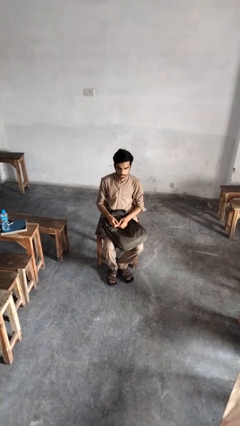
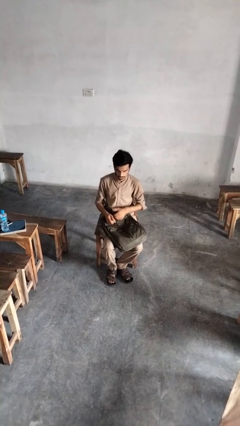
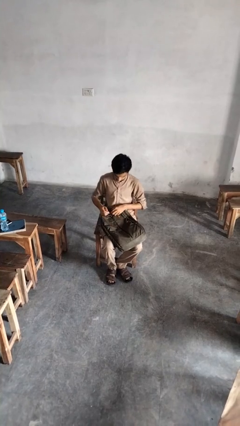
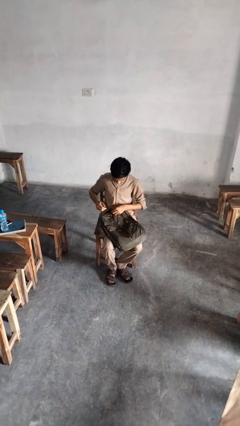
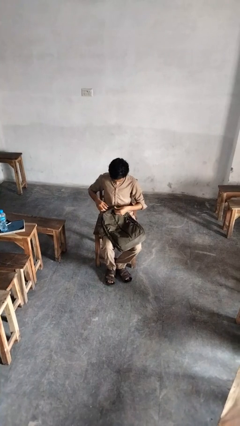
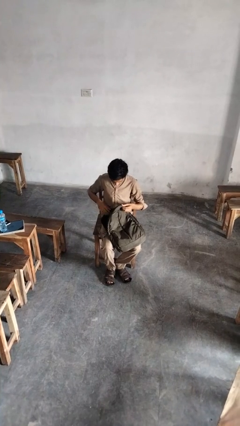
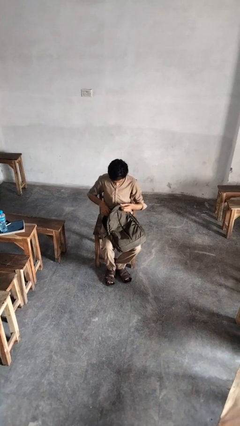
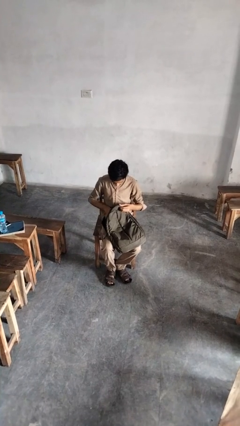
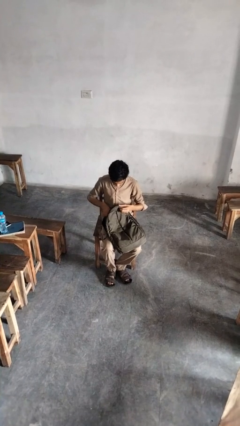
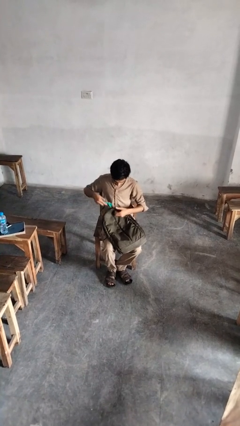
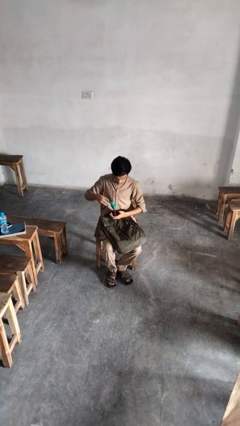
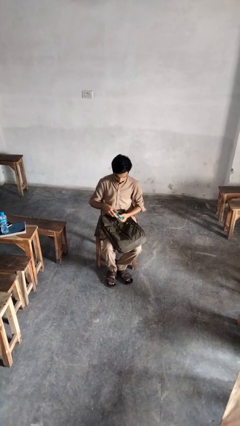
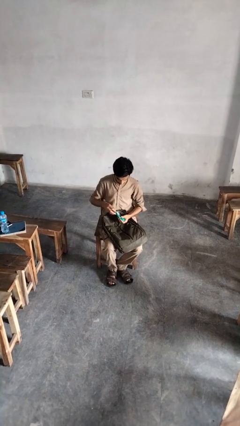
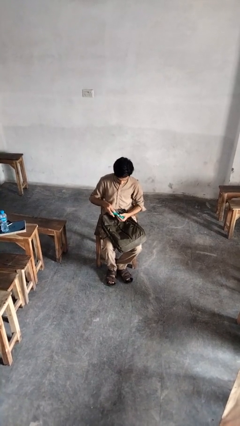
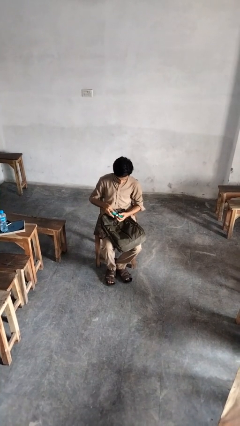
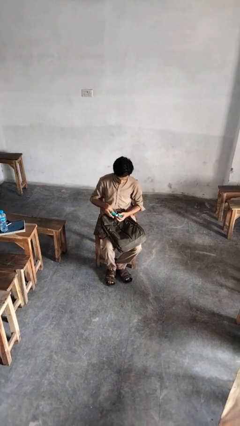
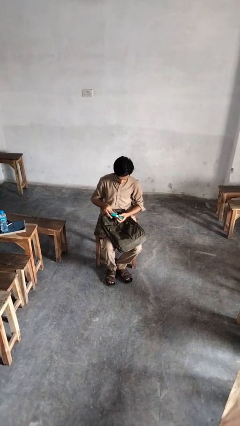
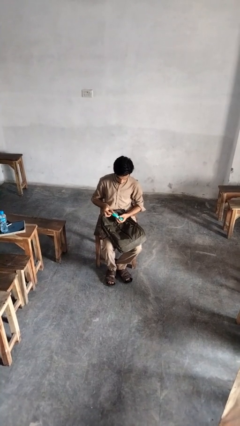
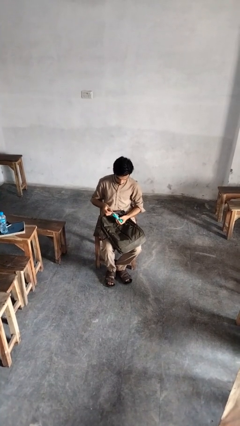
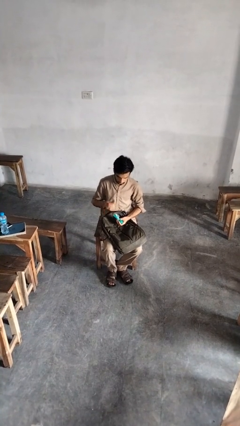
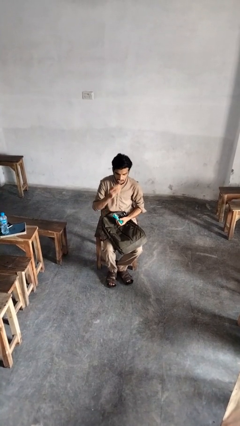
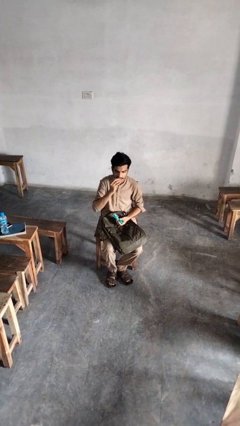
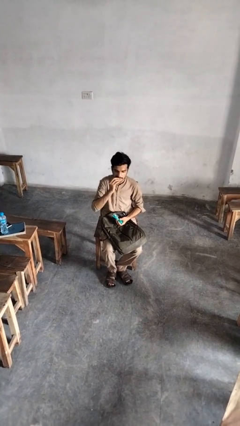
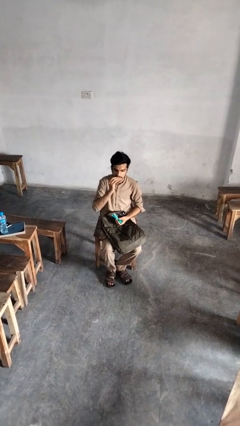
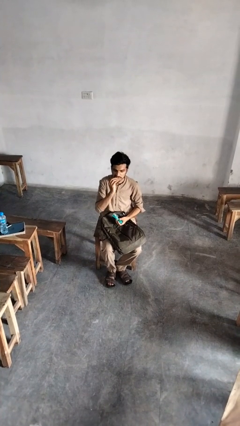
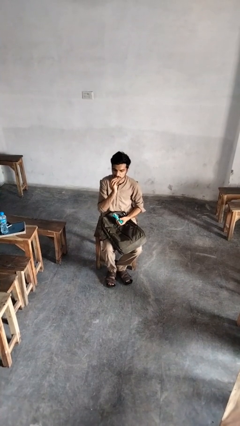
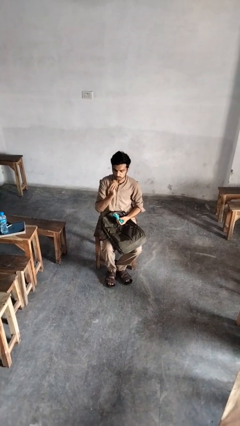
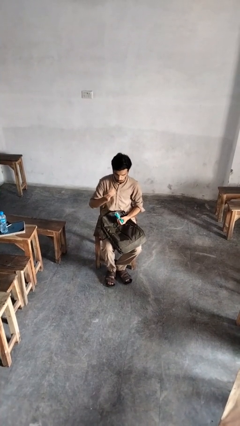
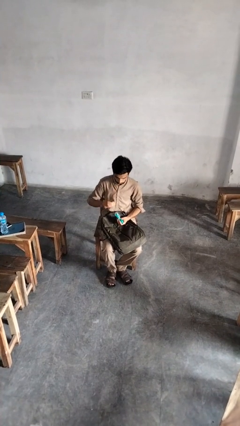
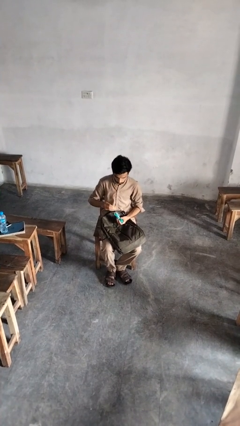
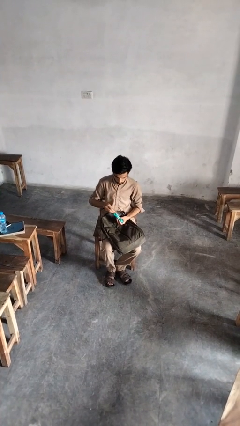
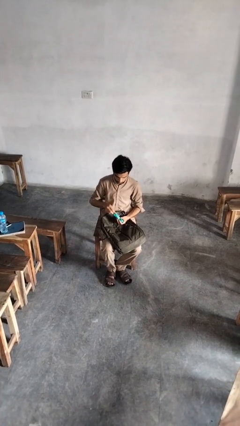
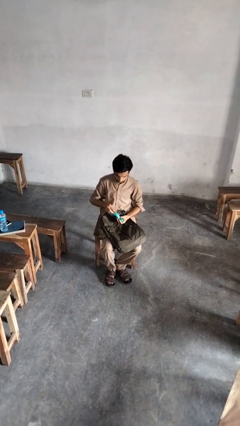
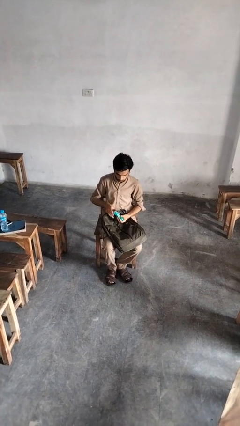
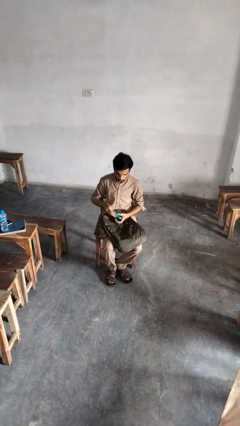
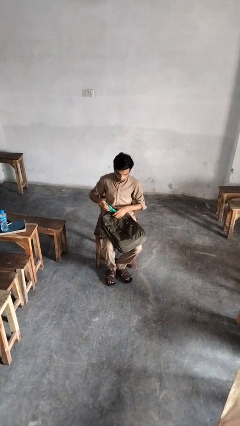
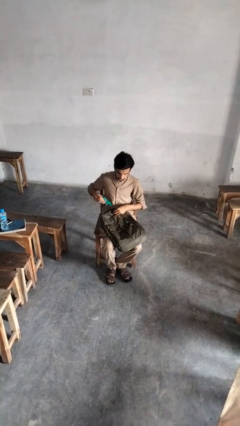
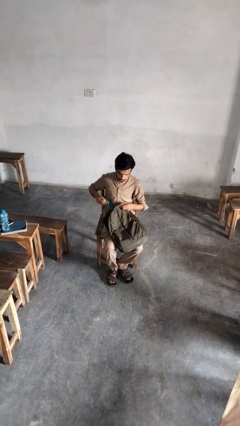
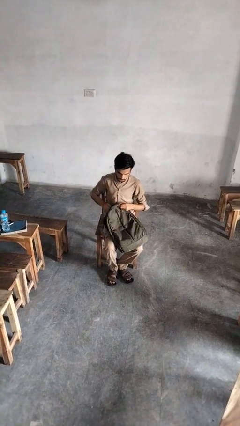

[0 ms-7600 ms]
person eats snack from bag

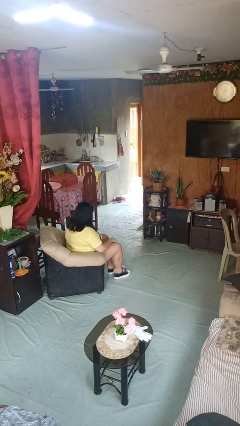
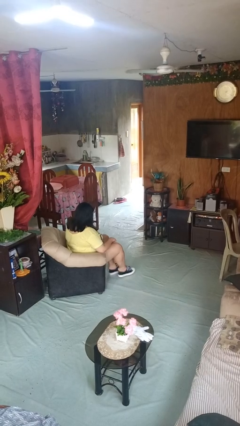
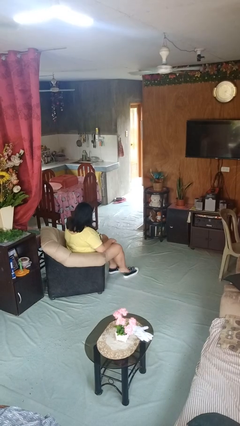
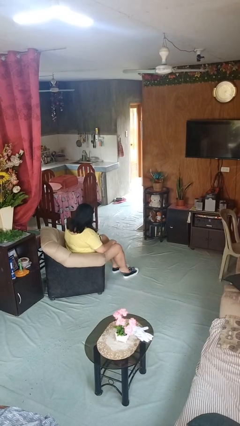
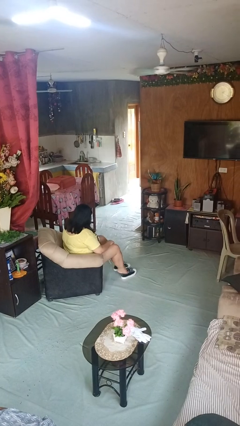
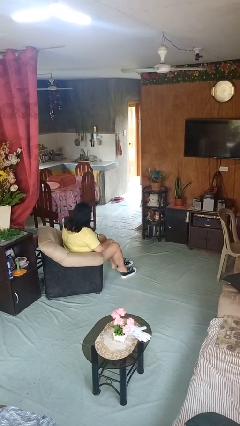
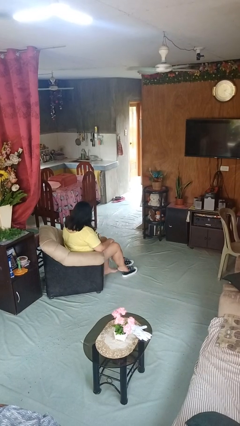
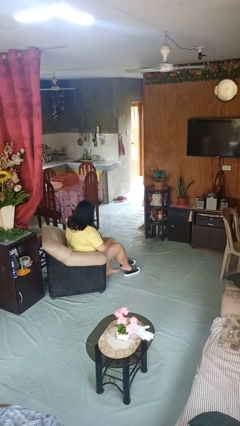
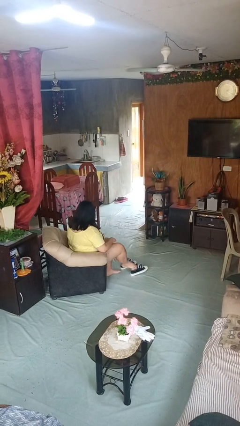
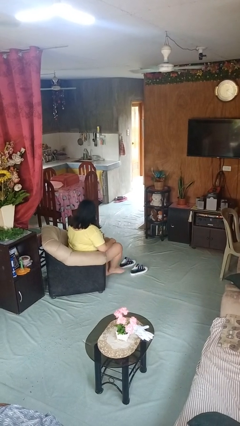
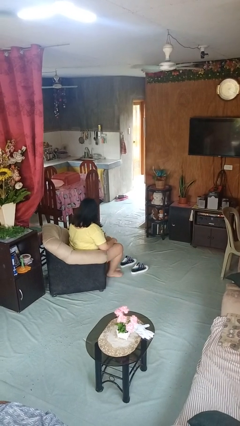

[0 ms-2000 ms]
person takes off shoes

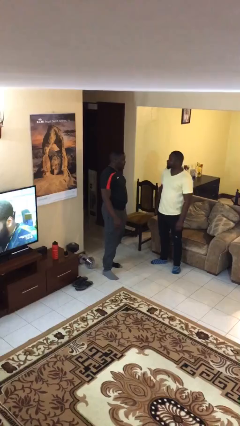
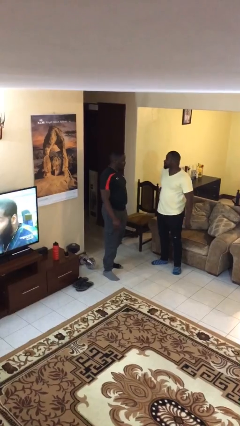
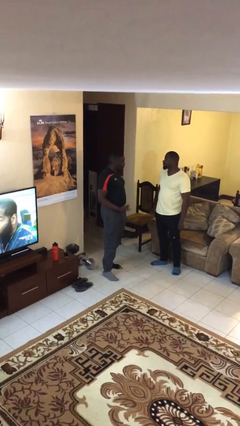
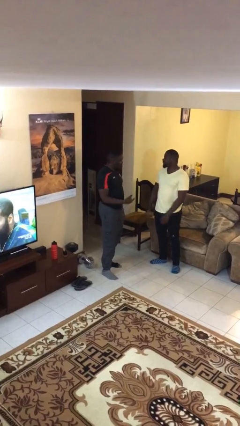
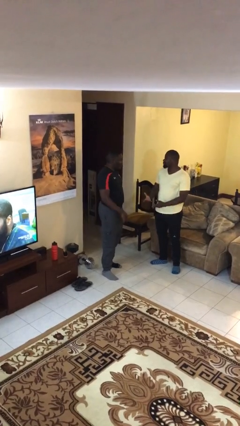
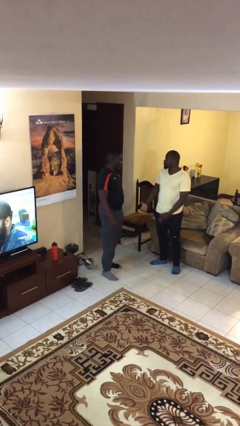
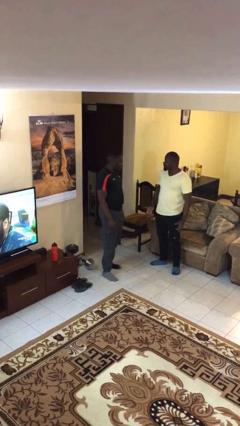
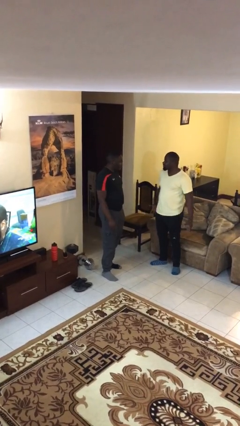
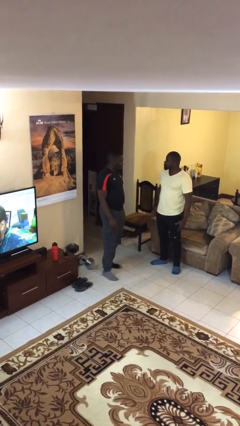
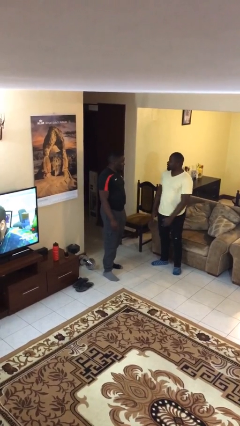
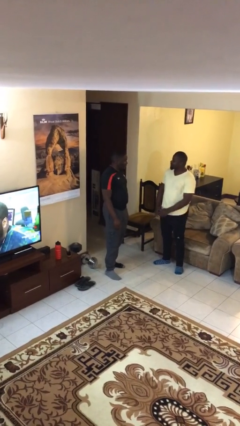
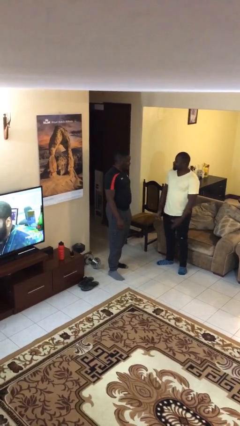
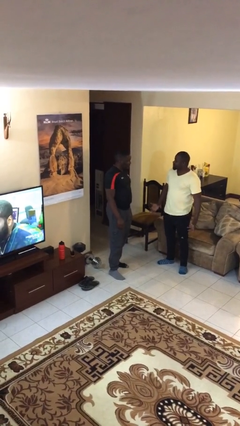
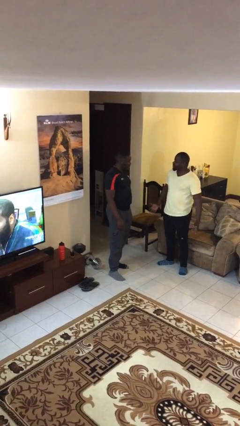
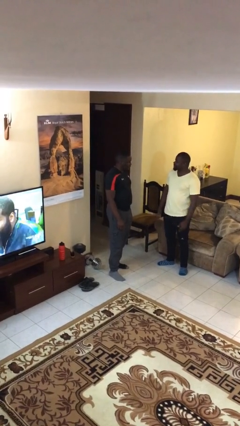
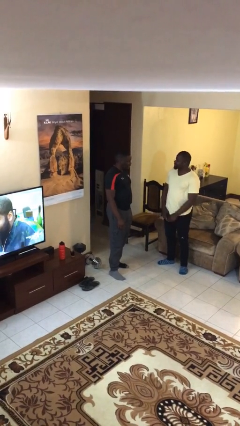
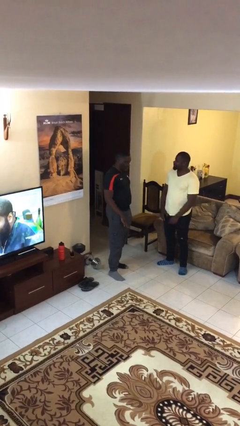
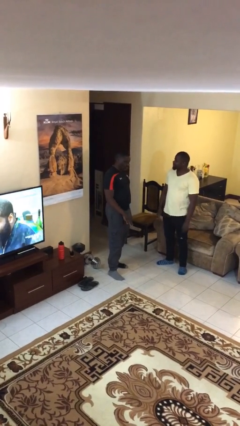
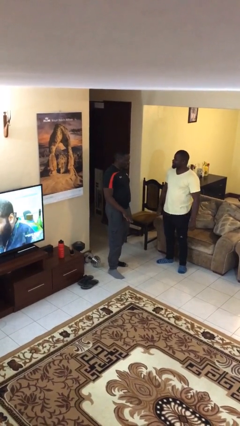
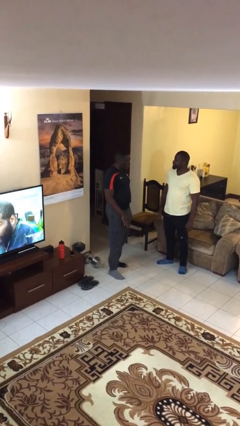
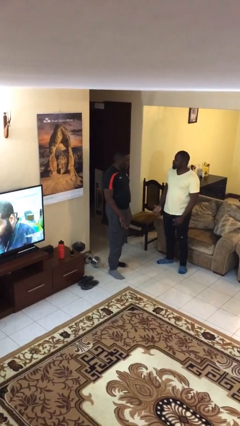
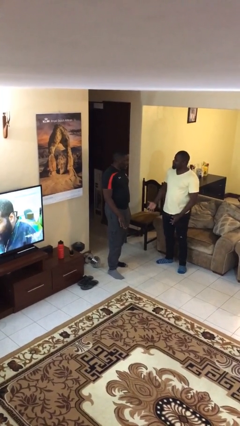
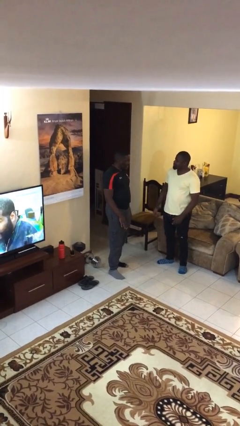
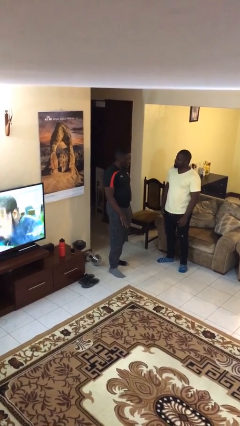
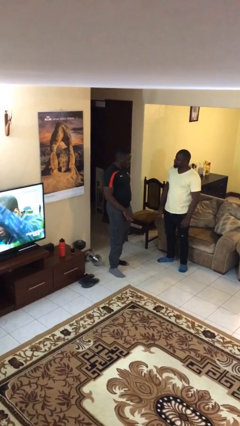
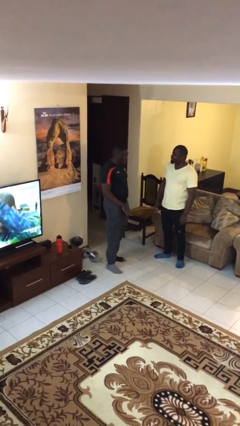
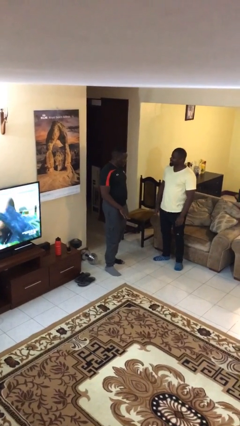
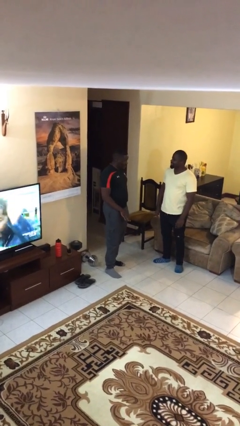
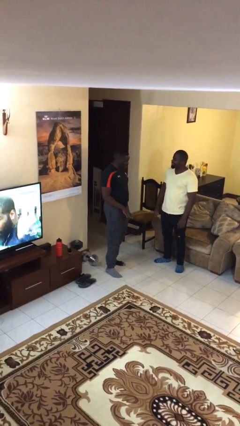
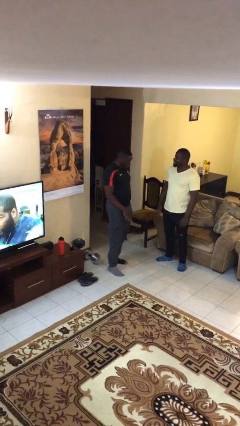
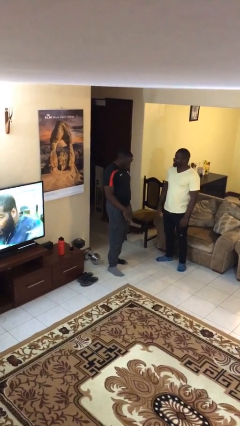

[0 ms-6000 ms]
person talks to person

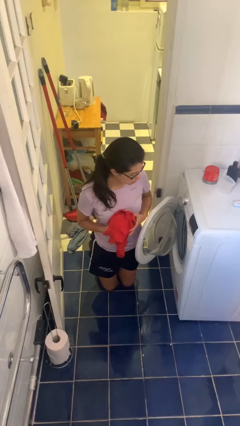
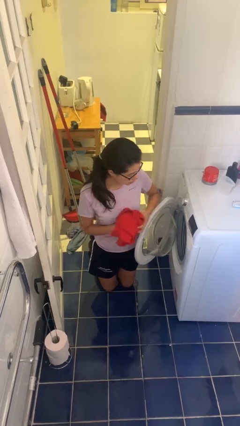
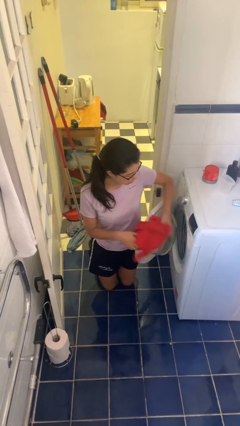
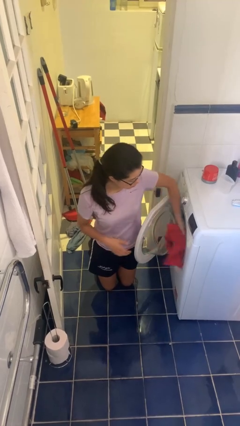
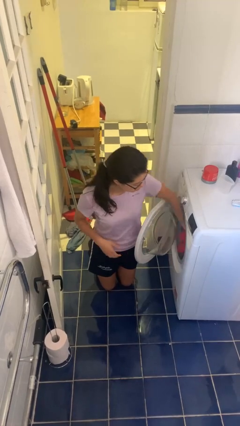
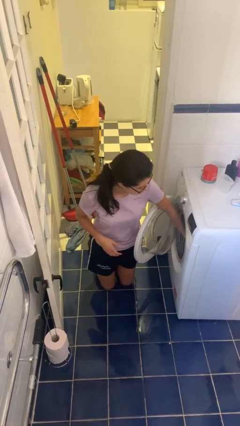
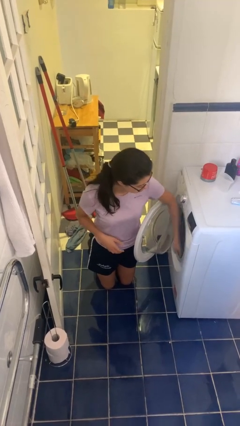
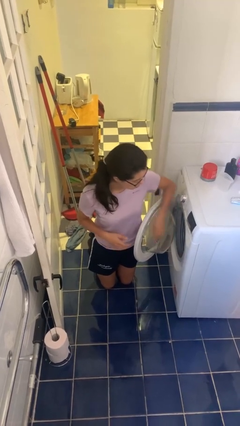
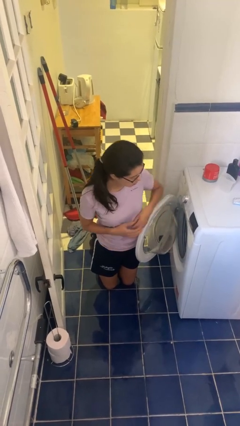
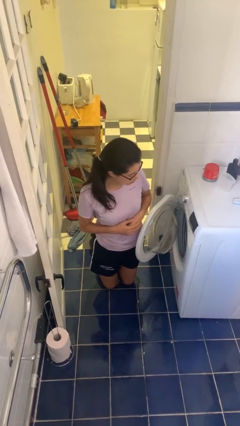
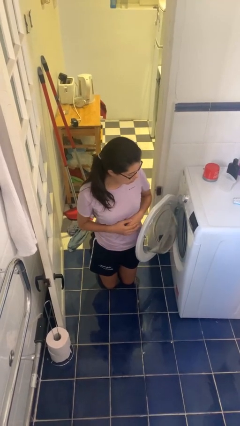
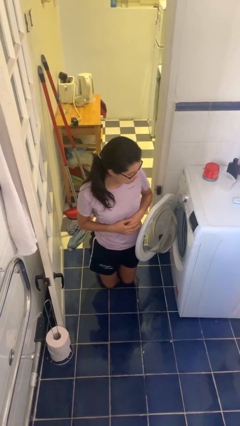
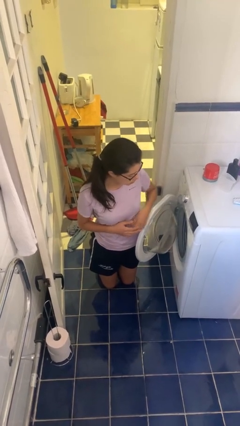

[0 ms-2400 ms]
person loads dryer
